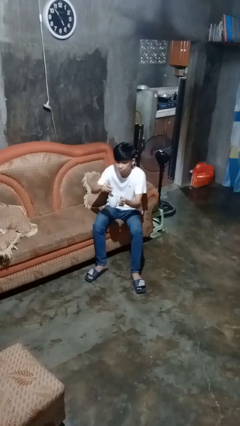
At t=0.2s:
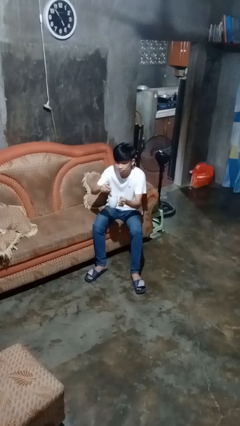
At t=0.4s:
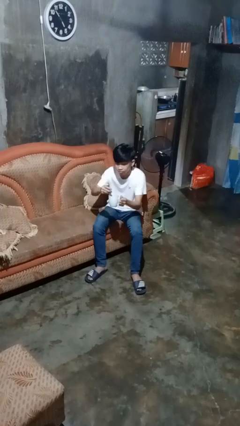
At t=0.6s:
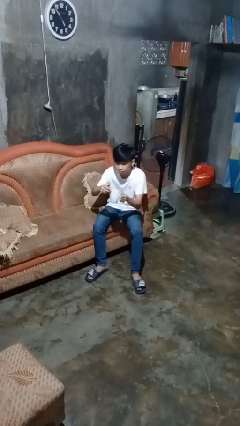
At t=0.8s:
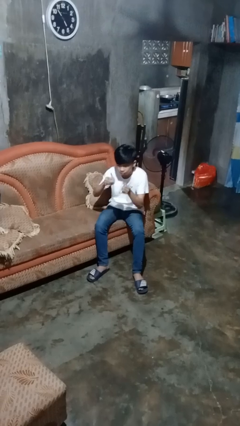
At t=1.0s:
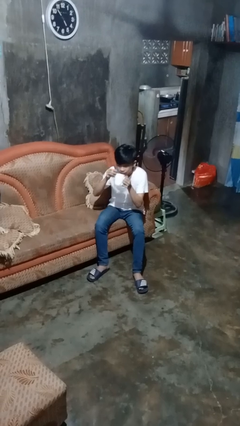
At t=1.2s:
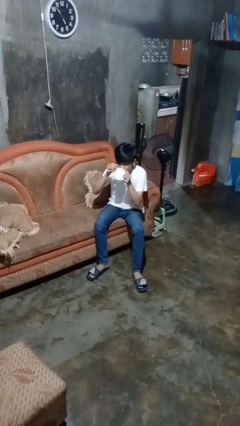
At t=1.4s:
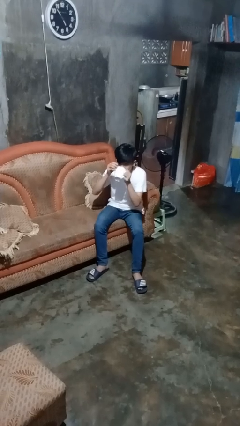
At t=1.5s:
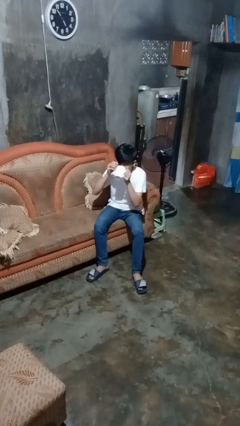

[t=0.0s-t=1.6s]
person drinks from mug

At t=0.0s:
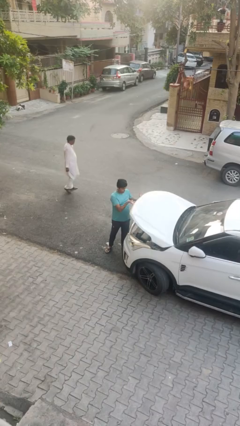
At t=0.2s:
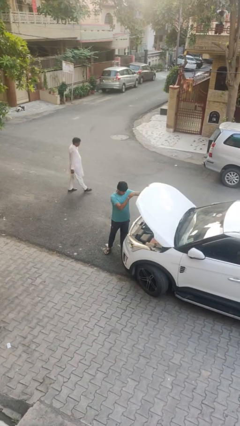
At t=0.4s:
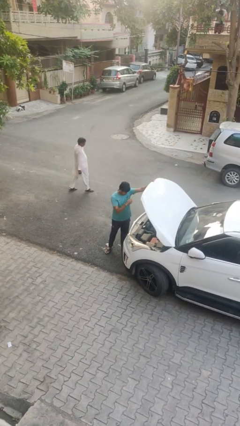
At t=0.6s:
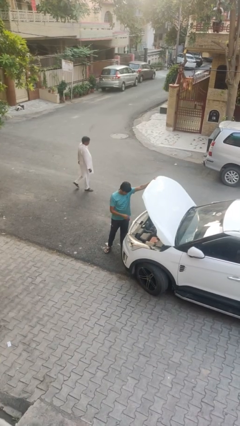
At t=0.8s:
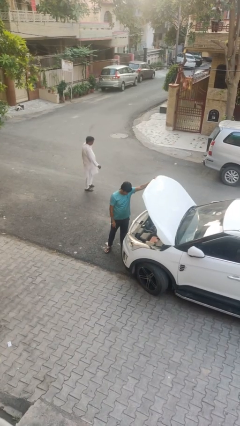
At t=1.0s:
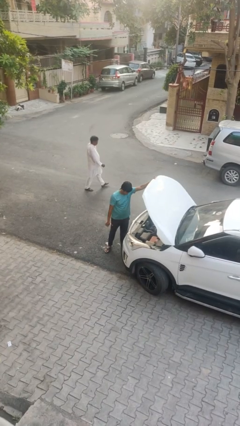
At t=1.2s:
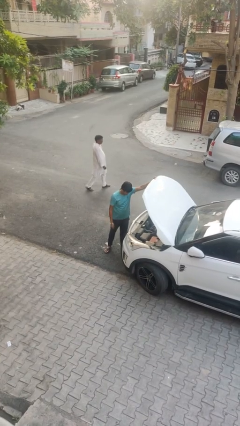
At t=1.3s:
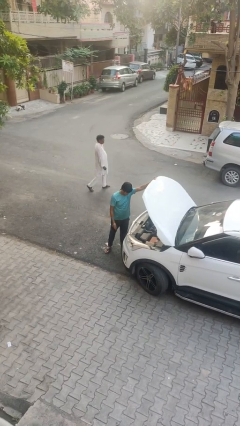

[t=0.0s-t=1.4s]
person opens car hood

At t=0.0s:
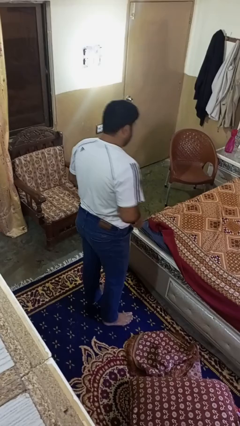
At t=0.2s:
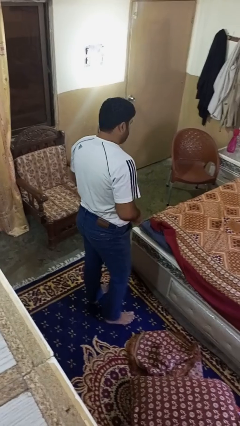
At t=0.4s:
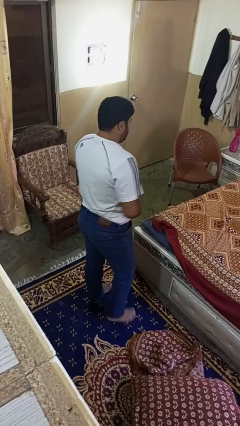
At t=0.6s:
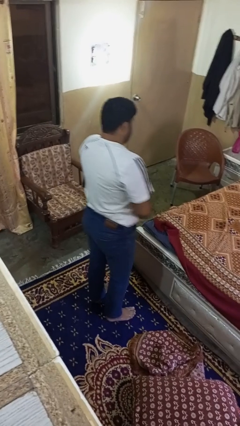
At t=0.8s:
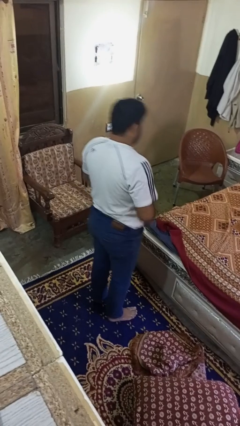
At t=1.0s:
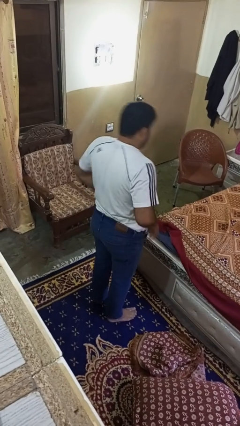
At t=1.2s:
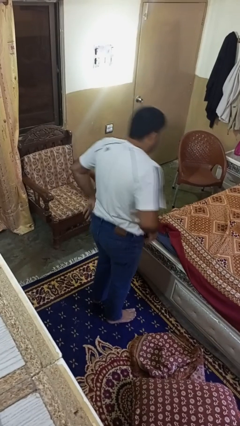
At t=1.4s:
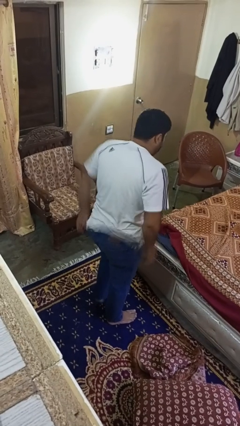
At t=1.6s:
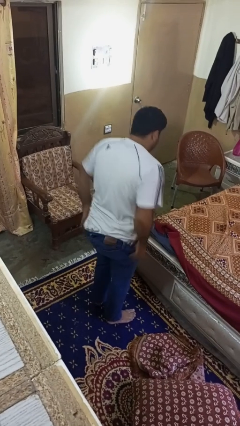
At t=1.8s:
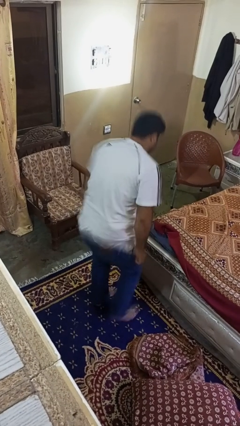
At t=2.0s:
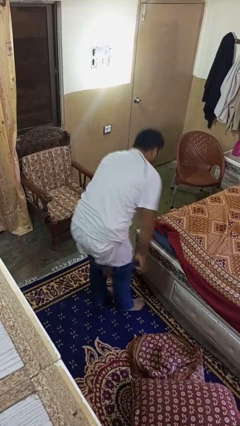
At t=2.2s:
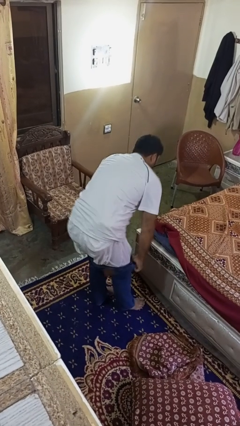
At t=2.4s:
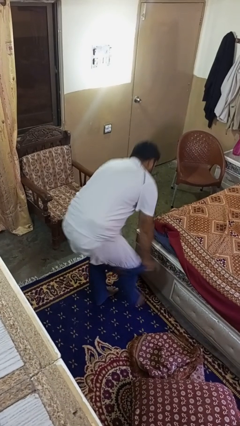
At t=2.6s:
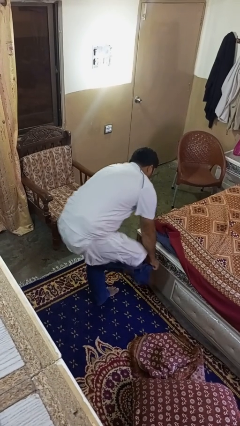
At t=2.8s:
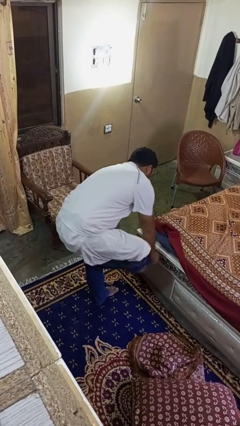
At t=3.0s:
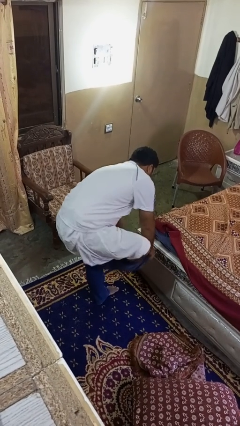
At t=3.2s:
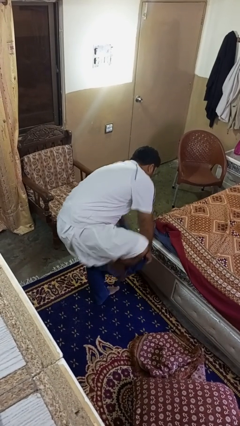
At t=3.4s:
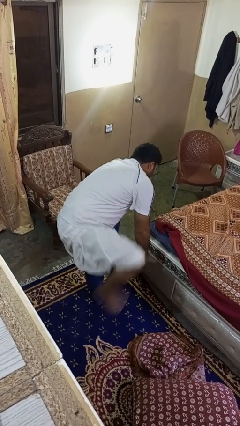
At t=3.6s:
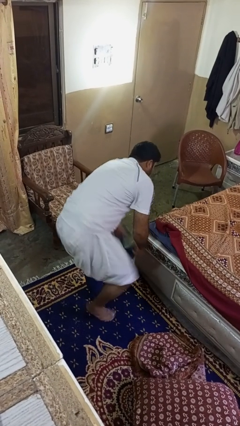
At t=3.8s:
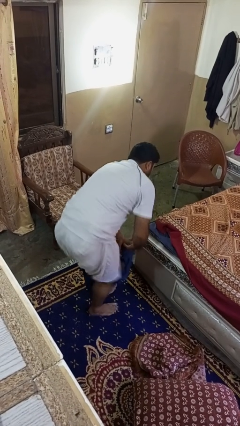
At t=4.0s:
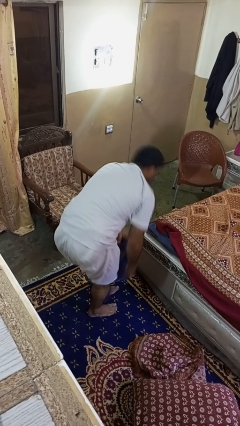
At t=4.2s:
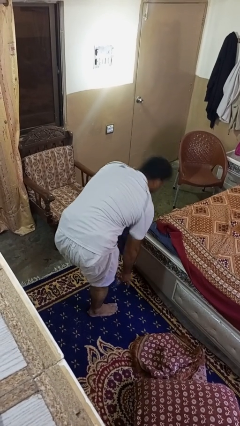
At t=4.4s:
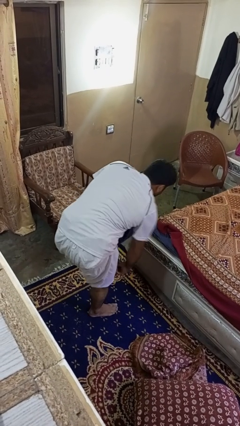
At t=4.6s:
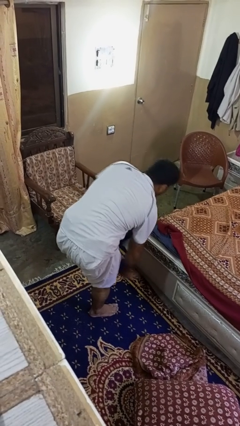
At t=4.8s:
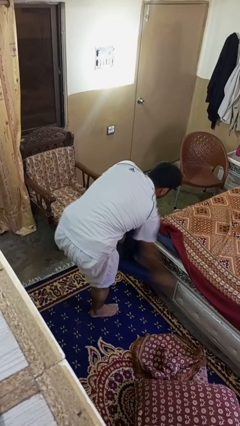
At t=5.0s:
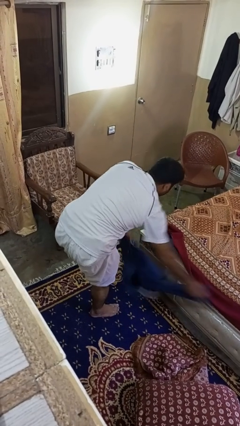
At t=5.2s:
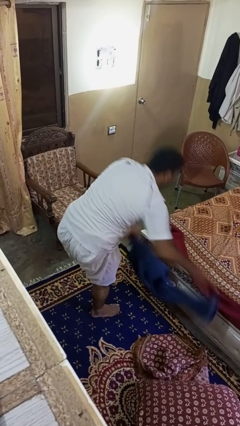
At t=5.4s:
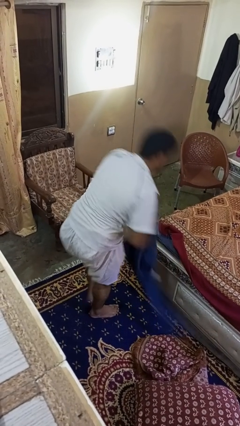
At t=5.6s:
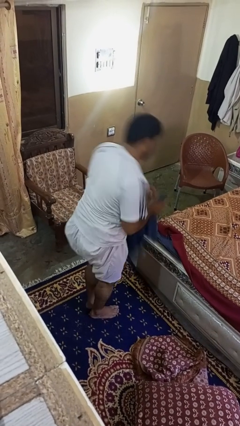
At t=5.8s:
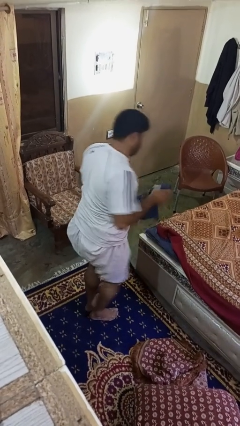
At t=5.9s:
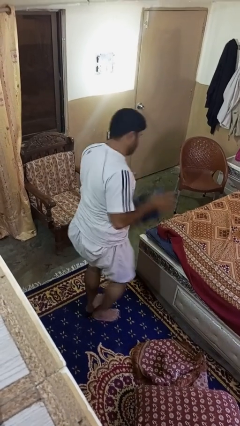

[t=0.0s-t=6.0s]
person takes off pants

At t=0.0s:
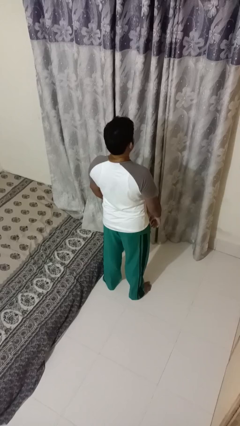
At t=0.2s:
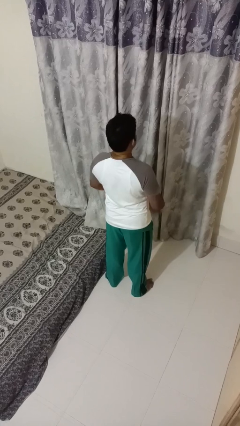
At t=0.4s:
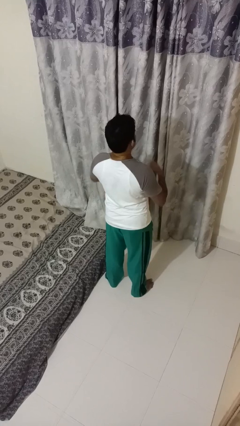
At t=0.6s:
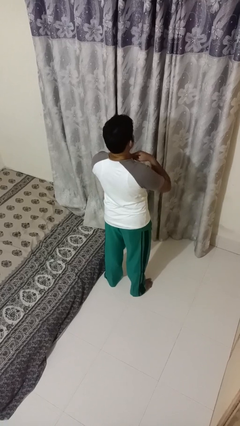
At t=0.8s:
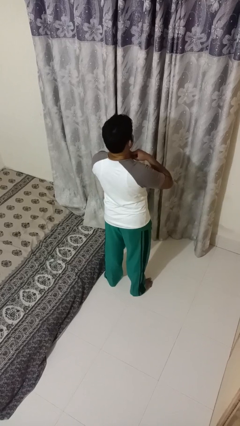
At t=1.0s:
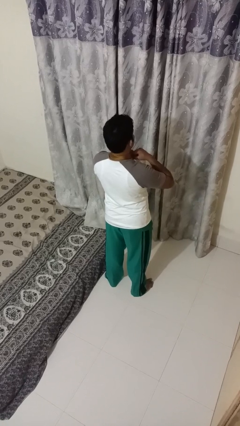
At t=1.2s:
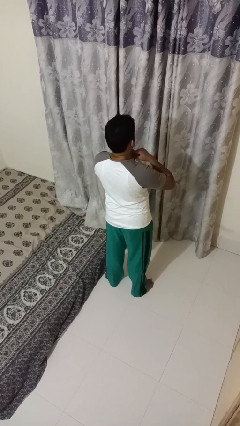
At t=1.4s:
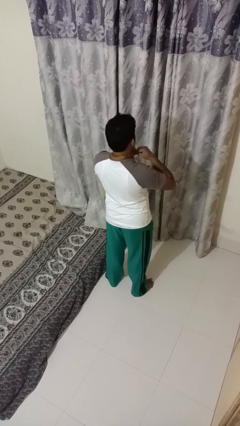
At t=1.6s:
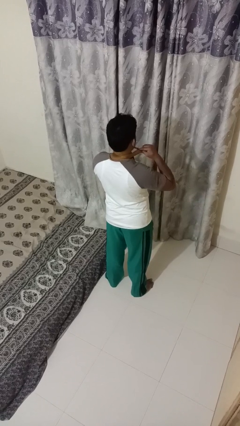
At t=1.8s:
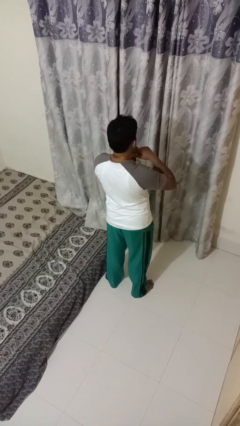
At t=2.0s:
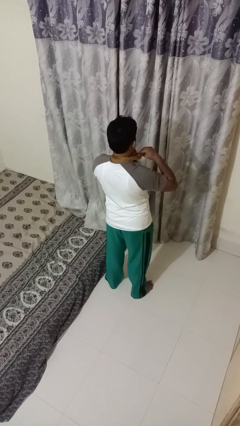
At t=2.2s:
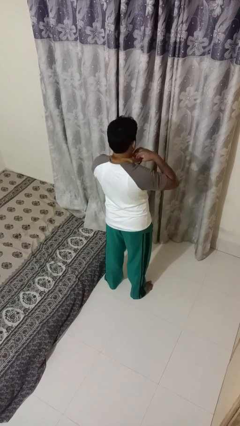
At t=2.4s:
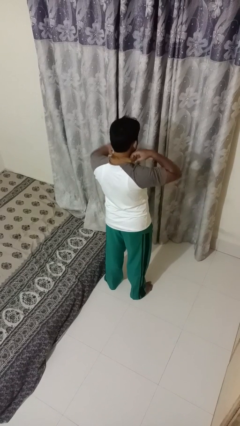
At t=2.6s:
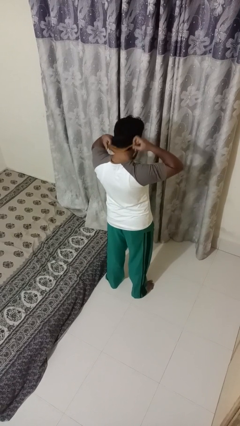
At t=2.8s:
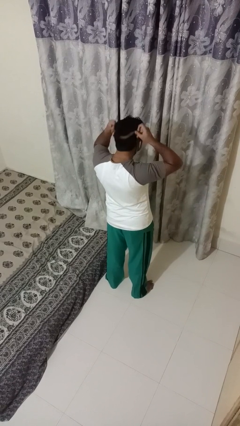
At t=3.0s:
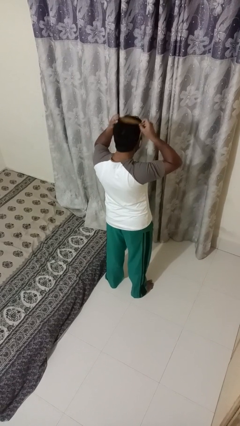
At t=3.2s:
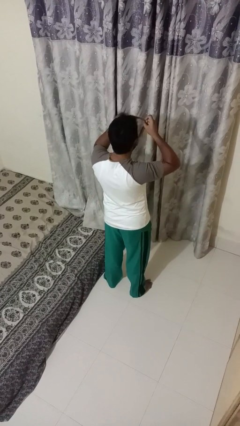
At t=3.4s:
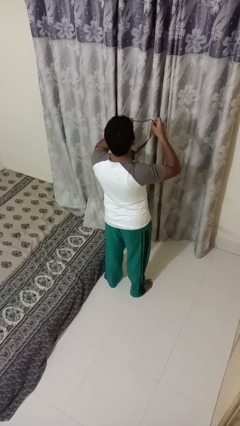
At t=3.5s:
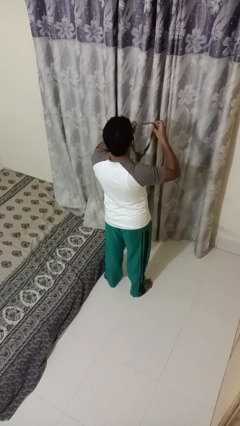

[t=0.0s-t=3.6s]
person takes off necktie

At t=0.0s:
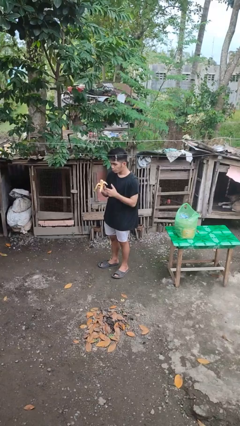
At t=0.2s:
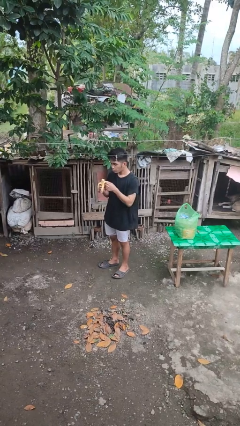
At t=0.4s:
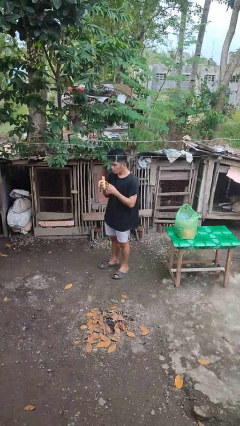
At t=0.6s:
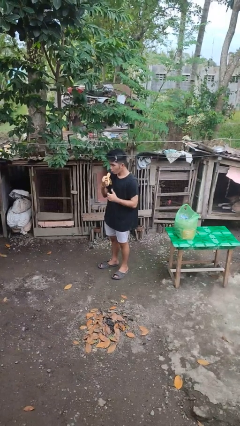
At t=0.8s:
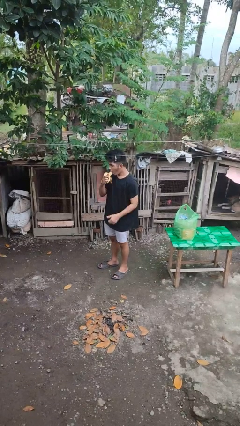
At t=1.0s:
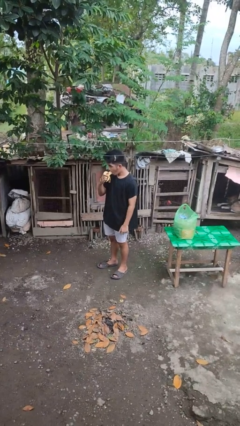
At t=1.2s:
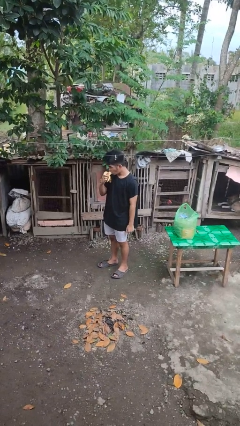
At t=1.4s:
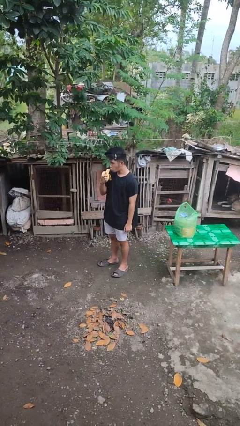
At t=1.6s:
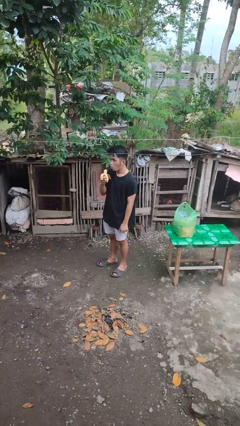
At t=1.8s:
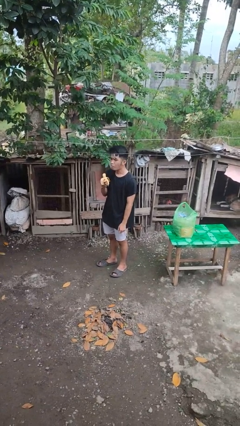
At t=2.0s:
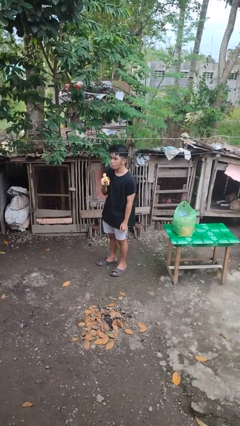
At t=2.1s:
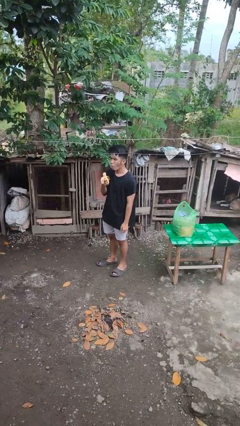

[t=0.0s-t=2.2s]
person eats banana

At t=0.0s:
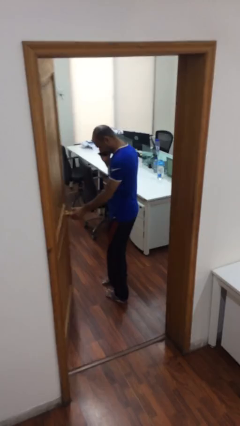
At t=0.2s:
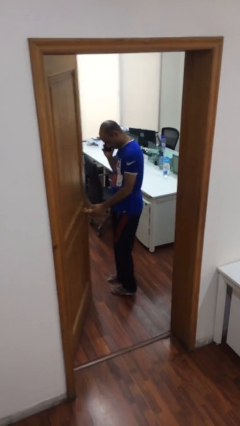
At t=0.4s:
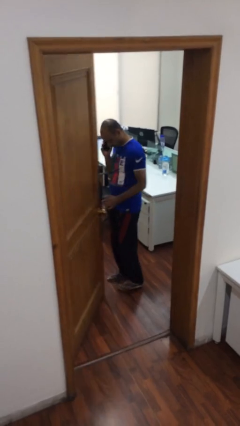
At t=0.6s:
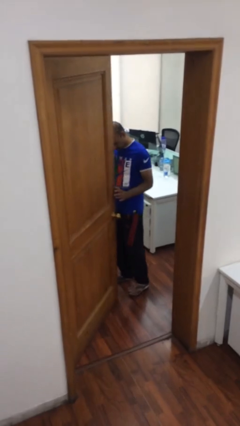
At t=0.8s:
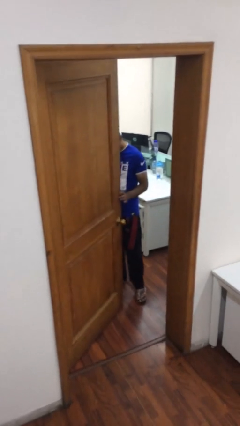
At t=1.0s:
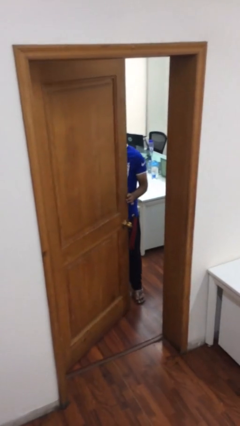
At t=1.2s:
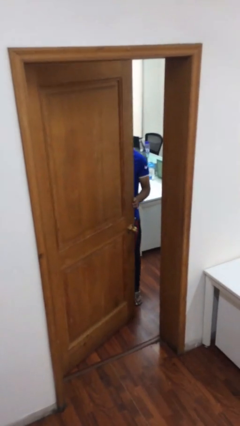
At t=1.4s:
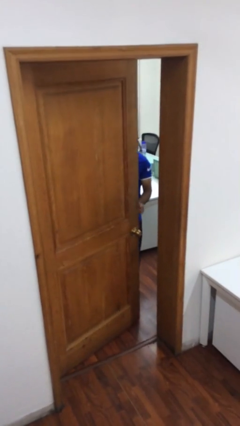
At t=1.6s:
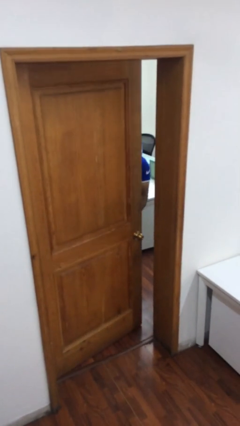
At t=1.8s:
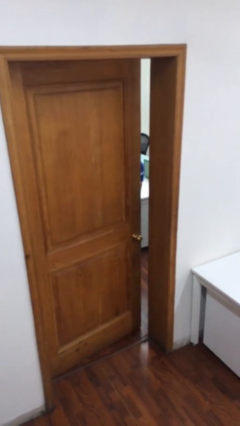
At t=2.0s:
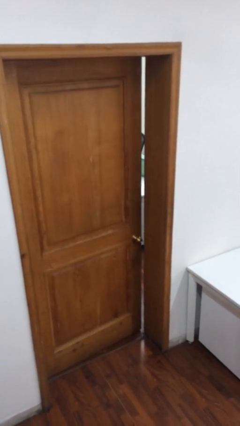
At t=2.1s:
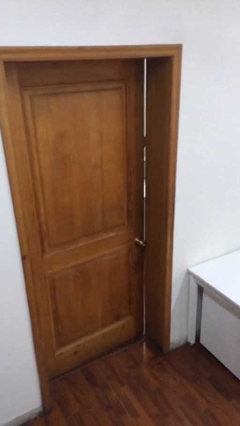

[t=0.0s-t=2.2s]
person closes facility door

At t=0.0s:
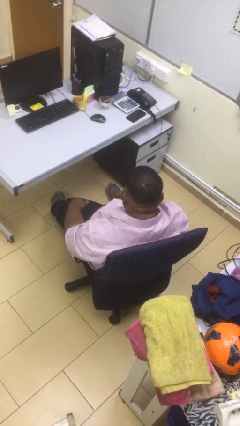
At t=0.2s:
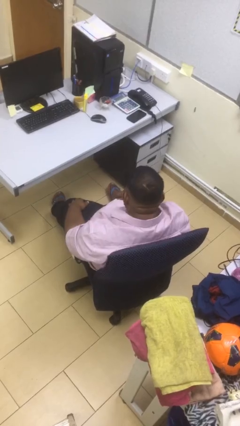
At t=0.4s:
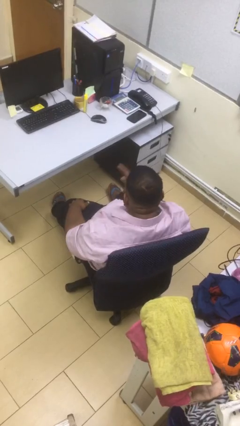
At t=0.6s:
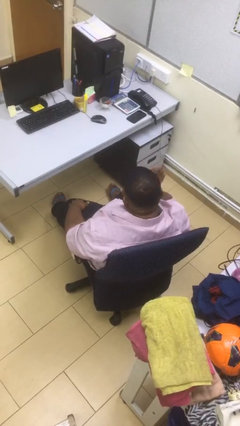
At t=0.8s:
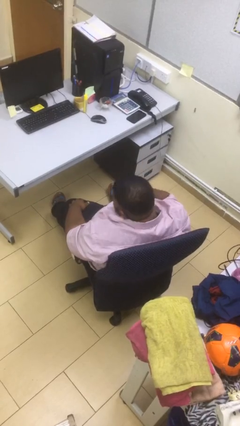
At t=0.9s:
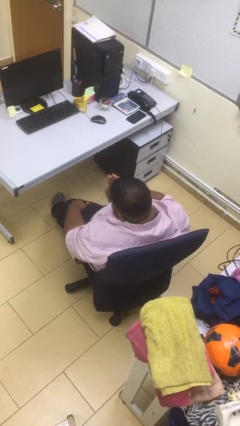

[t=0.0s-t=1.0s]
person swats bug
